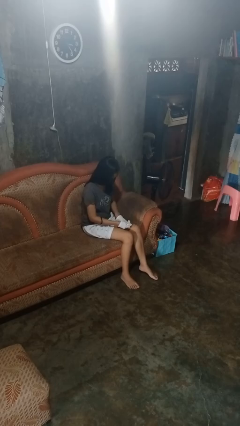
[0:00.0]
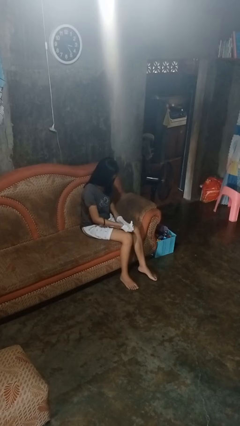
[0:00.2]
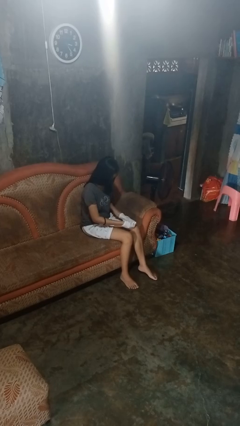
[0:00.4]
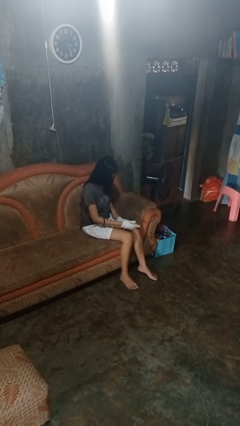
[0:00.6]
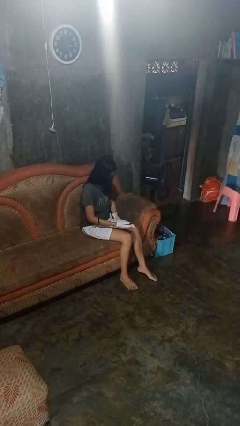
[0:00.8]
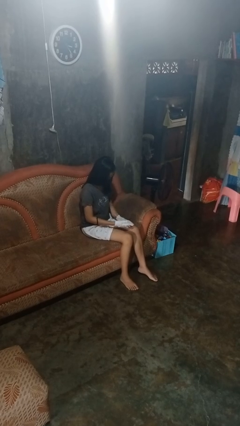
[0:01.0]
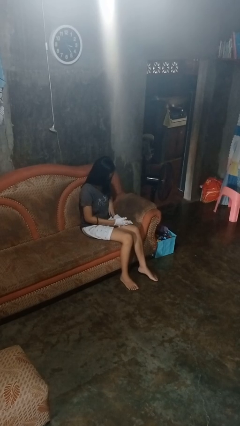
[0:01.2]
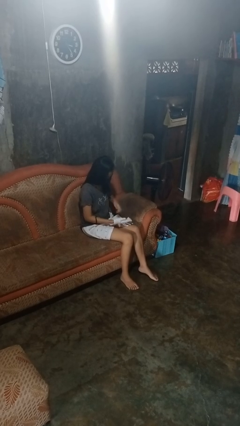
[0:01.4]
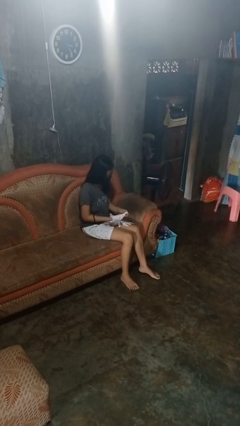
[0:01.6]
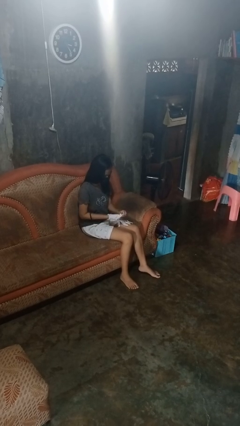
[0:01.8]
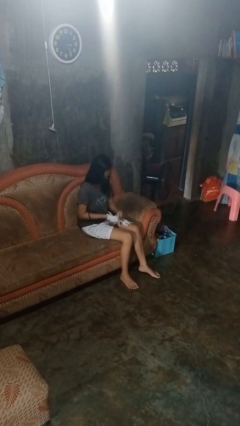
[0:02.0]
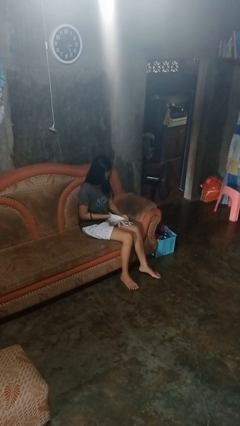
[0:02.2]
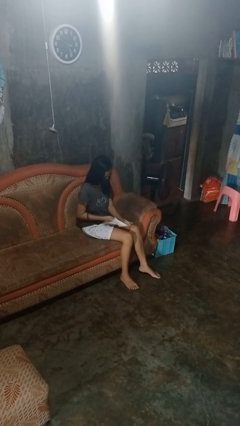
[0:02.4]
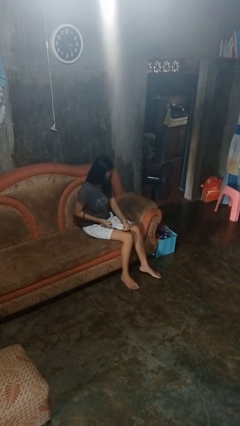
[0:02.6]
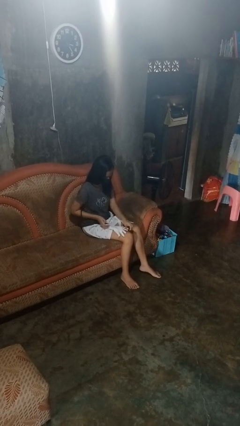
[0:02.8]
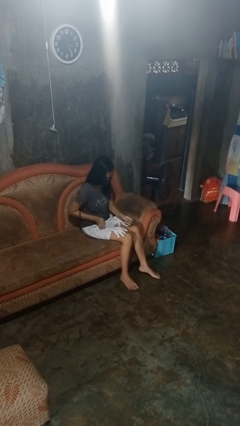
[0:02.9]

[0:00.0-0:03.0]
person takes off gloves

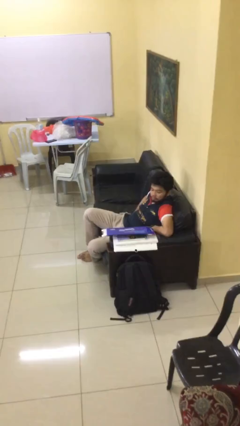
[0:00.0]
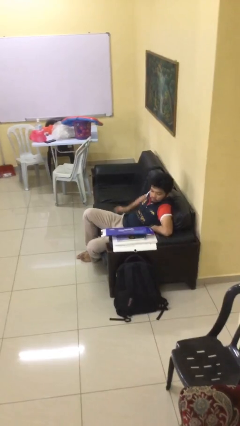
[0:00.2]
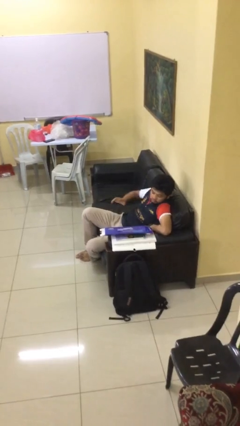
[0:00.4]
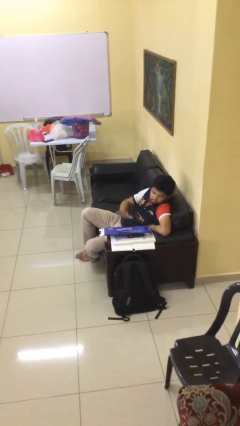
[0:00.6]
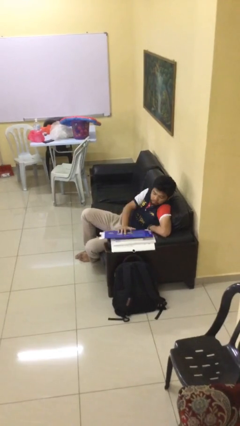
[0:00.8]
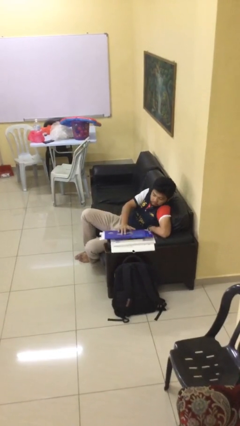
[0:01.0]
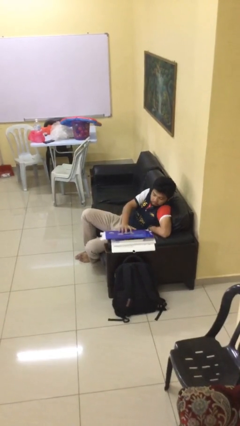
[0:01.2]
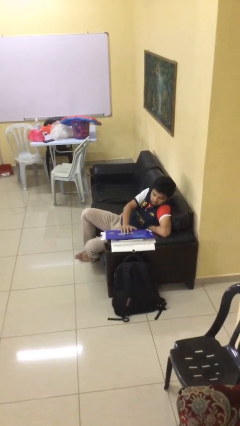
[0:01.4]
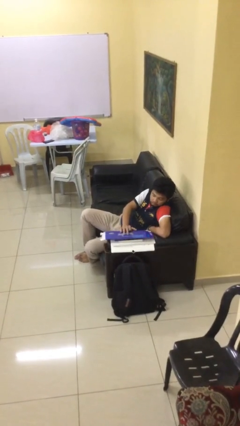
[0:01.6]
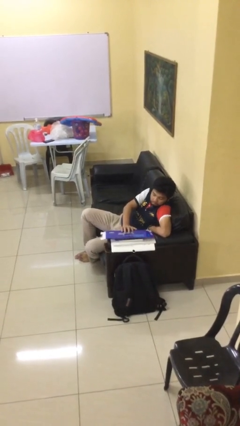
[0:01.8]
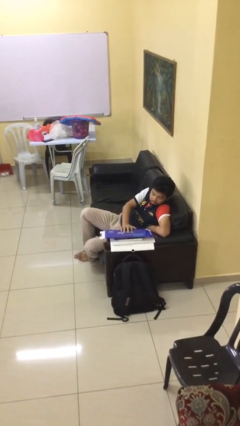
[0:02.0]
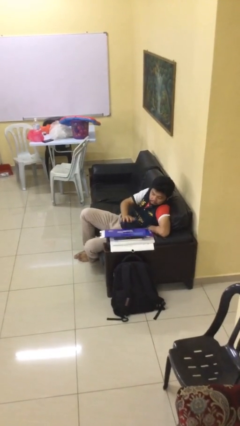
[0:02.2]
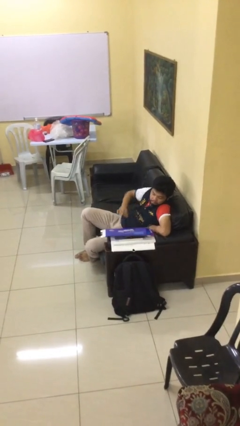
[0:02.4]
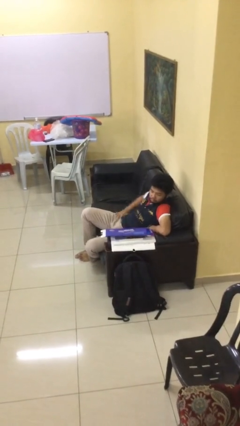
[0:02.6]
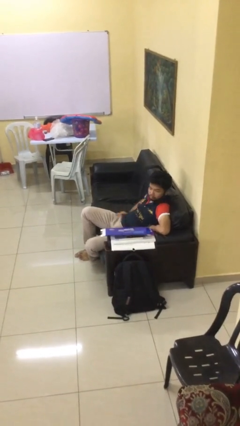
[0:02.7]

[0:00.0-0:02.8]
person taps object with finger

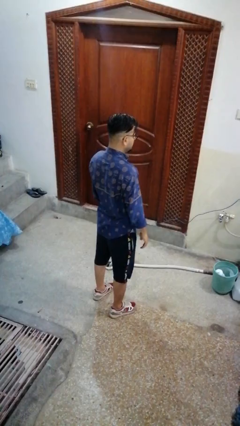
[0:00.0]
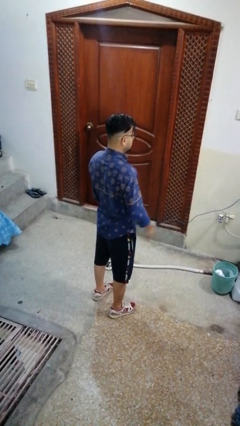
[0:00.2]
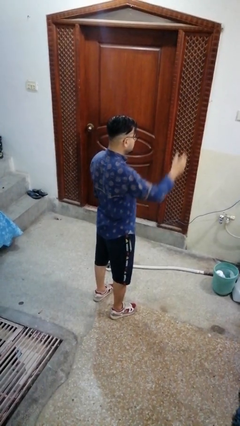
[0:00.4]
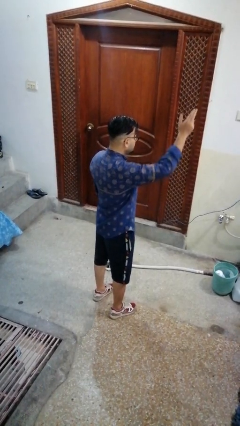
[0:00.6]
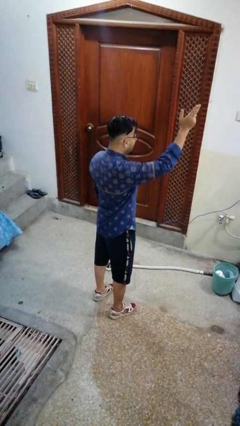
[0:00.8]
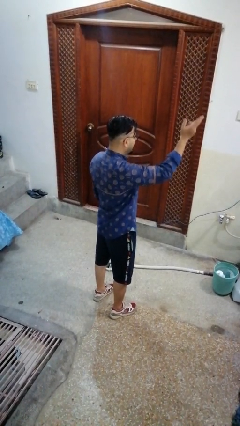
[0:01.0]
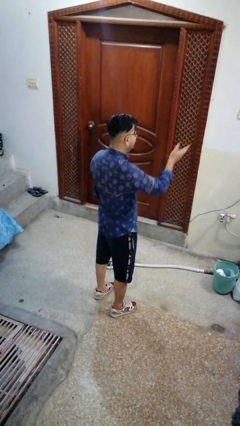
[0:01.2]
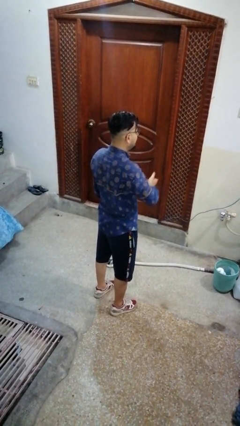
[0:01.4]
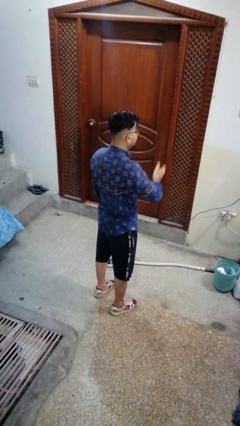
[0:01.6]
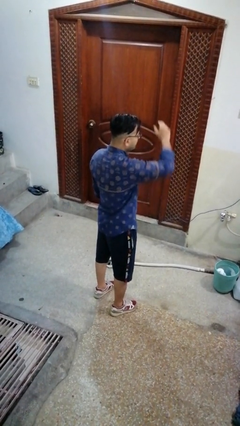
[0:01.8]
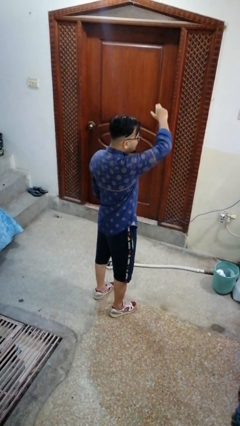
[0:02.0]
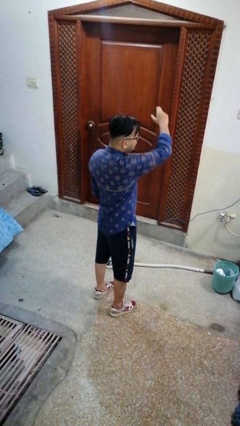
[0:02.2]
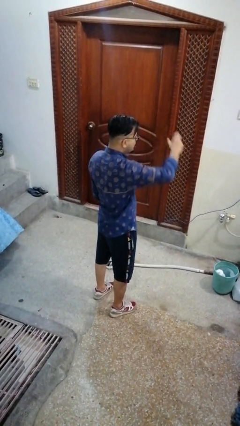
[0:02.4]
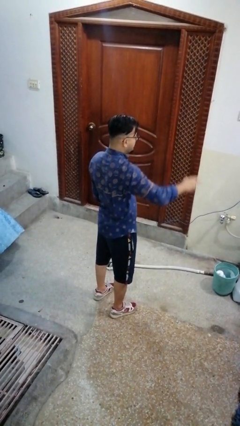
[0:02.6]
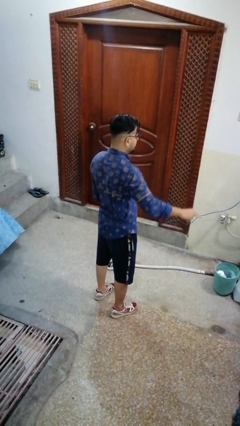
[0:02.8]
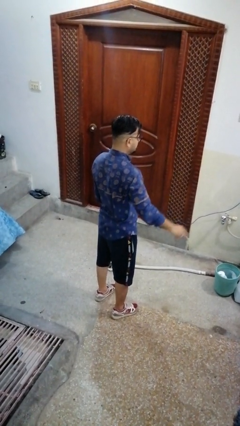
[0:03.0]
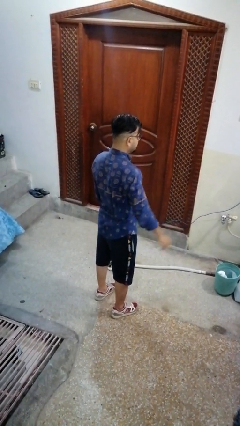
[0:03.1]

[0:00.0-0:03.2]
person gestures cut

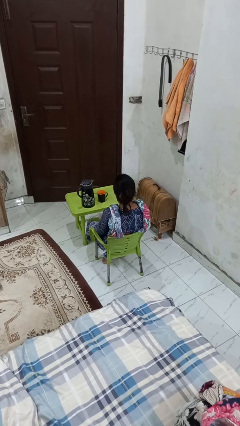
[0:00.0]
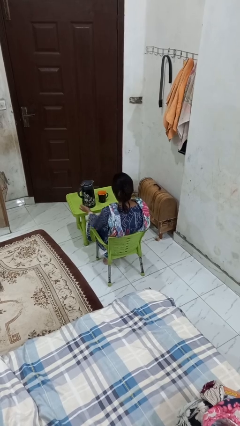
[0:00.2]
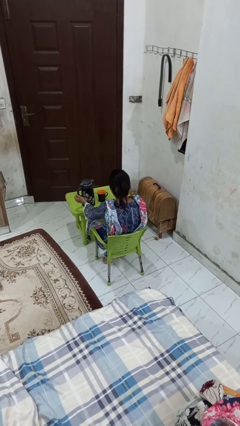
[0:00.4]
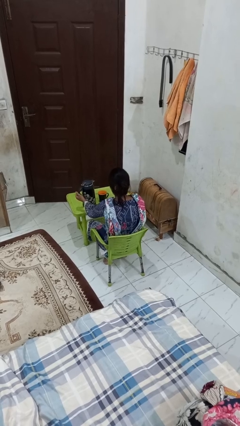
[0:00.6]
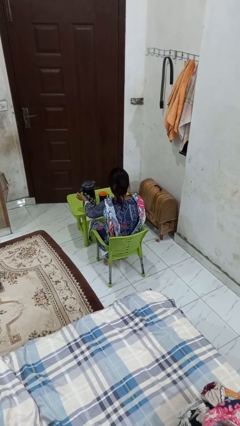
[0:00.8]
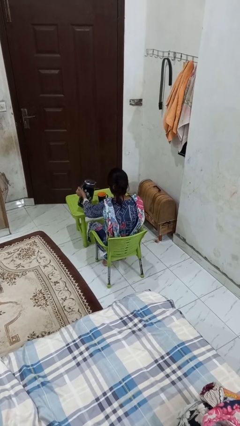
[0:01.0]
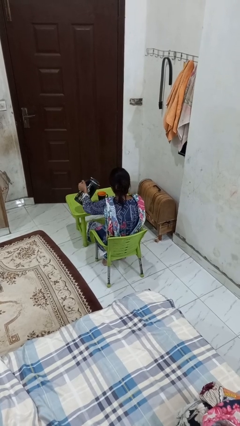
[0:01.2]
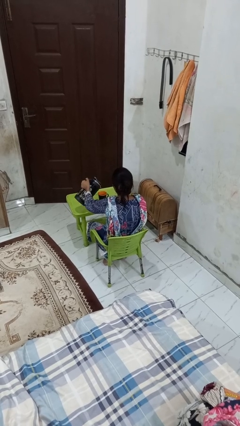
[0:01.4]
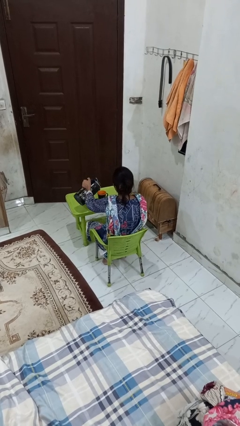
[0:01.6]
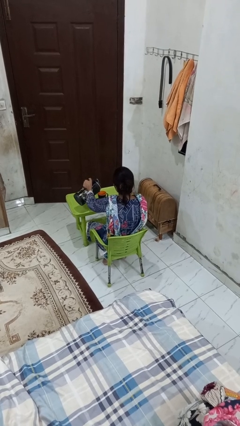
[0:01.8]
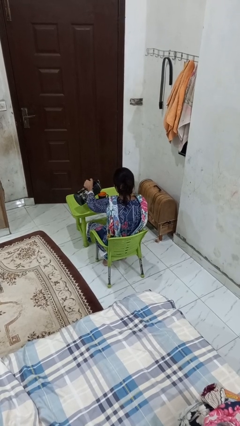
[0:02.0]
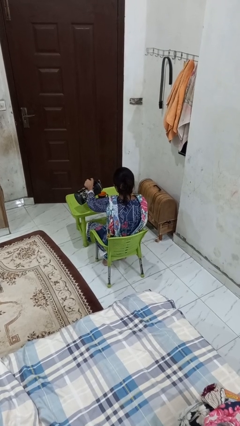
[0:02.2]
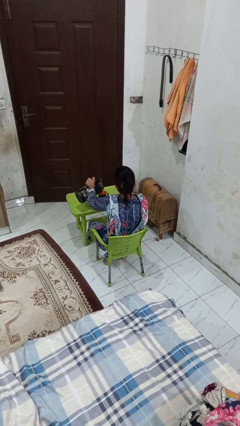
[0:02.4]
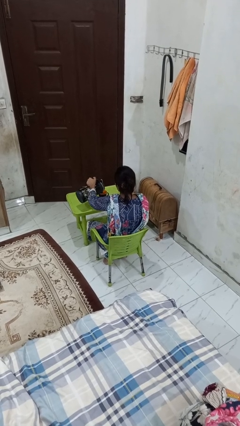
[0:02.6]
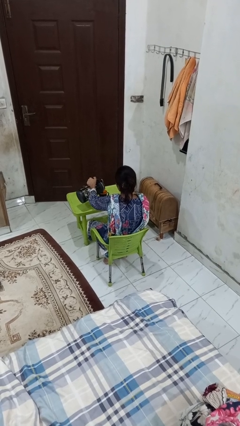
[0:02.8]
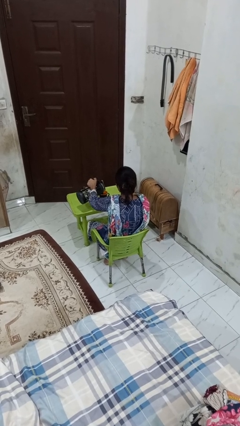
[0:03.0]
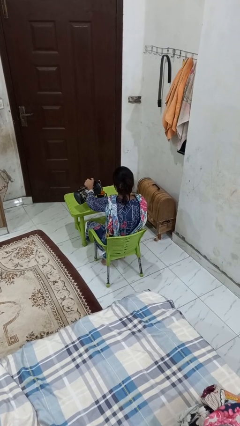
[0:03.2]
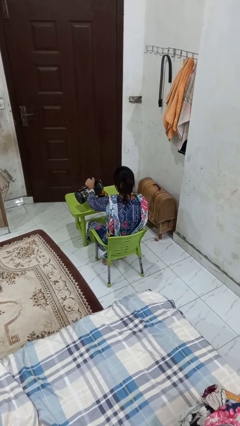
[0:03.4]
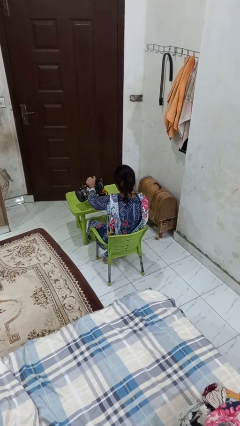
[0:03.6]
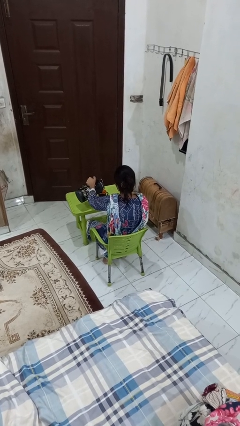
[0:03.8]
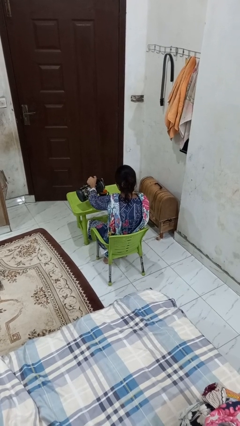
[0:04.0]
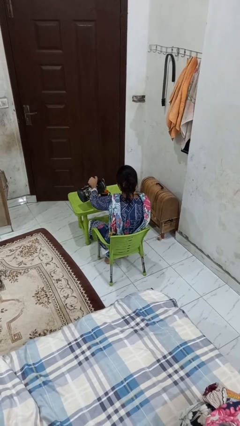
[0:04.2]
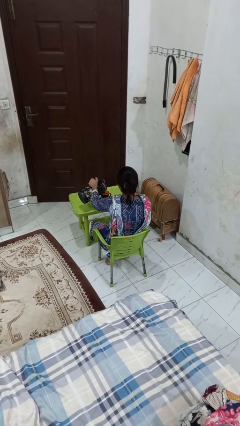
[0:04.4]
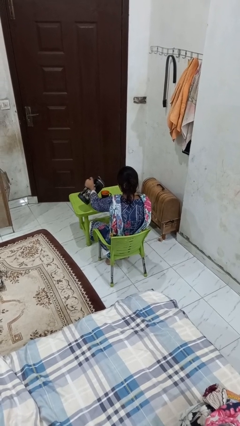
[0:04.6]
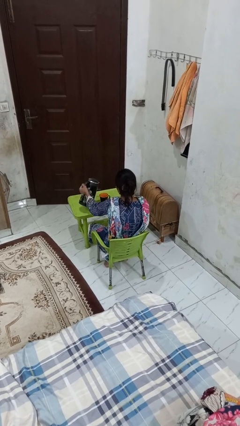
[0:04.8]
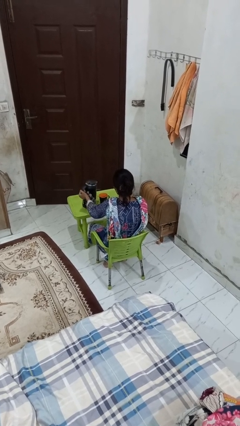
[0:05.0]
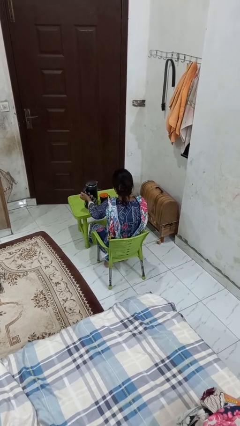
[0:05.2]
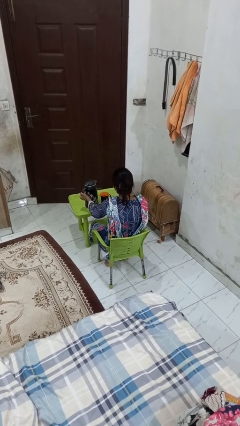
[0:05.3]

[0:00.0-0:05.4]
person pours coffee into mug

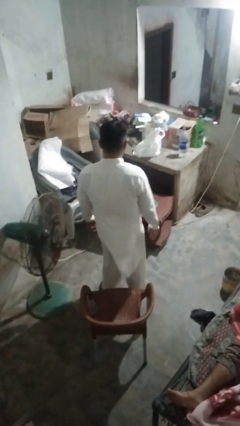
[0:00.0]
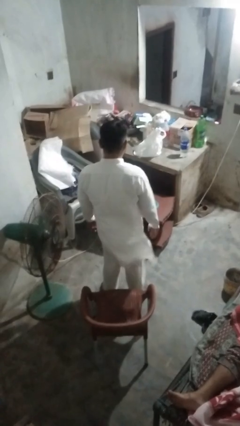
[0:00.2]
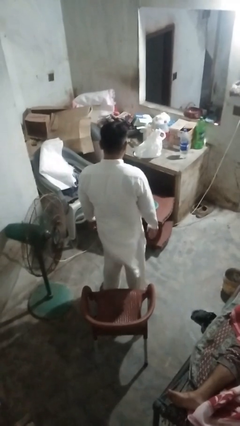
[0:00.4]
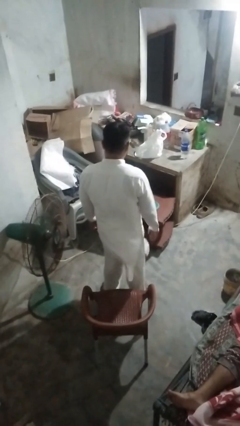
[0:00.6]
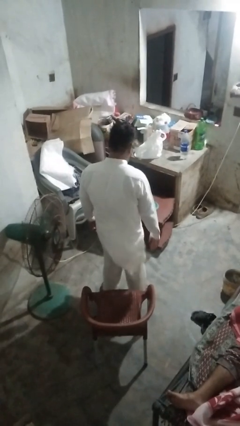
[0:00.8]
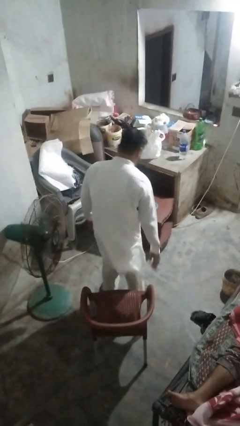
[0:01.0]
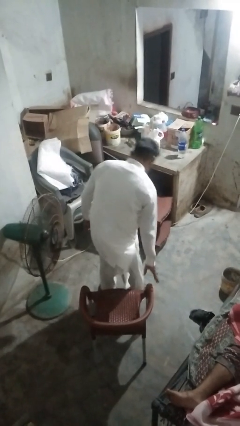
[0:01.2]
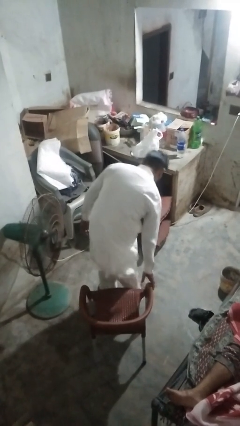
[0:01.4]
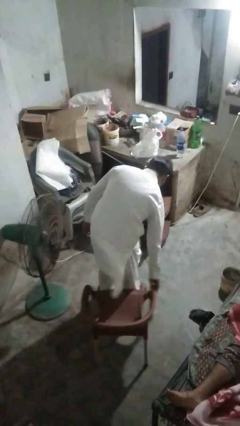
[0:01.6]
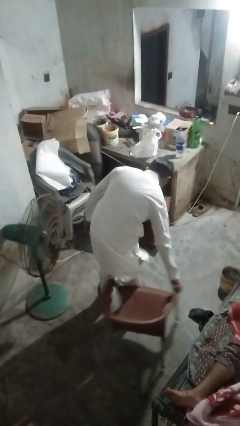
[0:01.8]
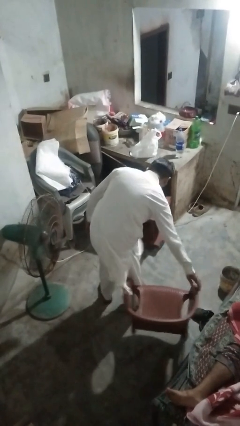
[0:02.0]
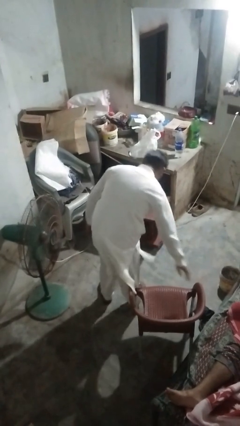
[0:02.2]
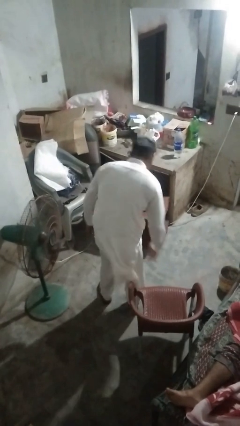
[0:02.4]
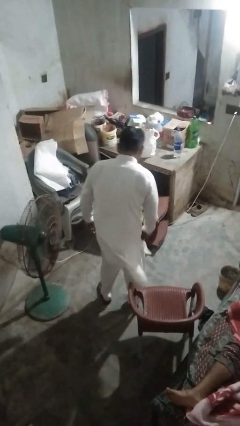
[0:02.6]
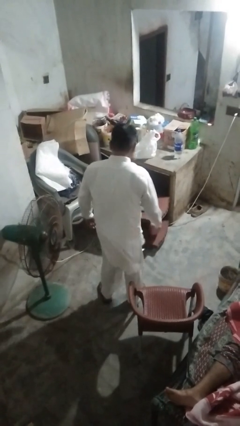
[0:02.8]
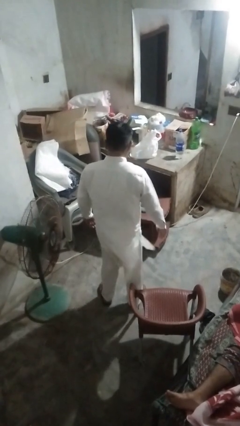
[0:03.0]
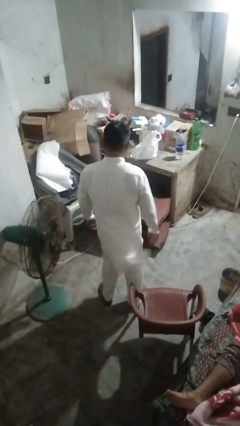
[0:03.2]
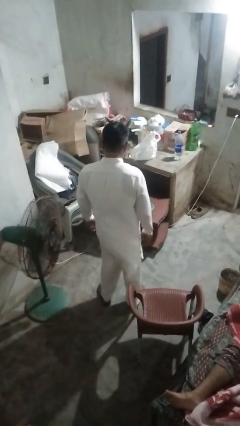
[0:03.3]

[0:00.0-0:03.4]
person pushes in chair
